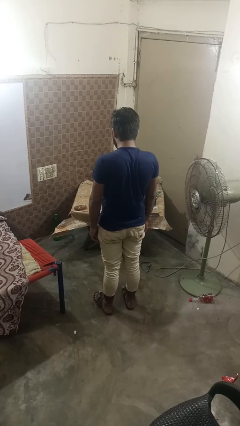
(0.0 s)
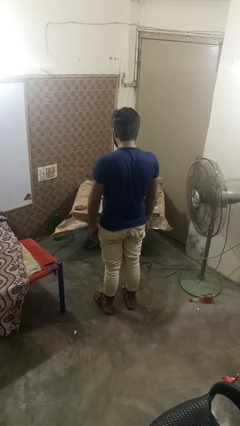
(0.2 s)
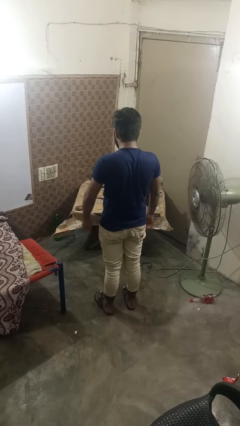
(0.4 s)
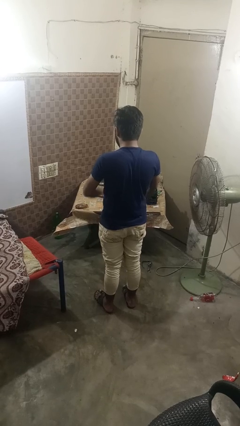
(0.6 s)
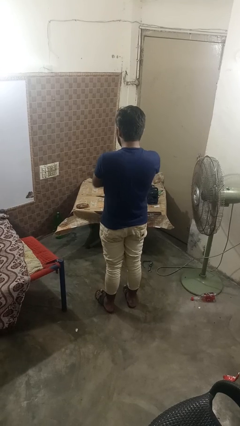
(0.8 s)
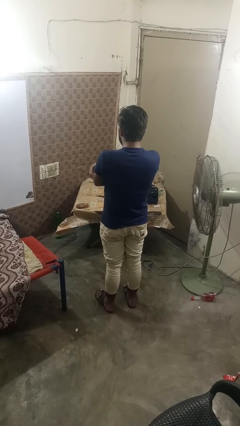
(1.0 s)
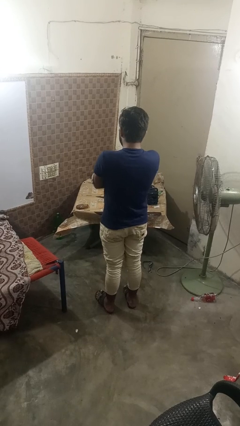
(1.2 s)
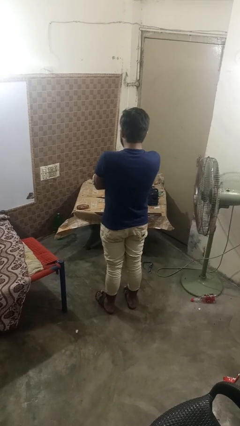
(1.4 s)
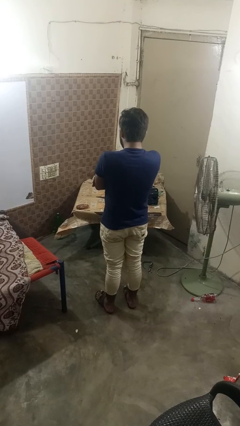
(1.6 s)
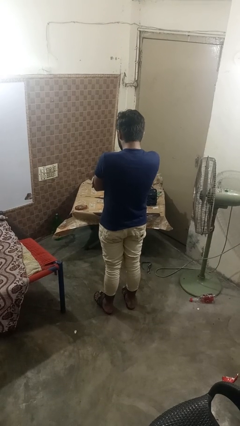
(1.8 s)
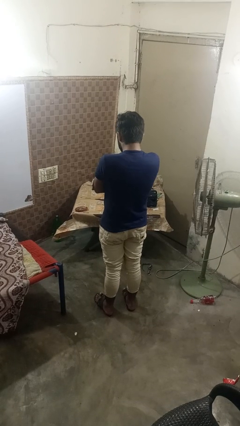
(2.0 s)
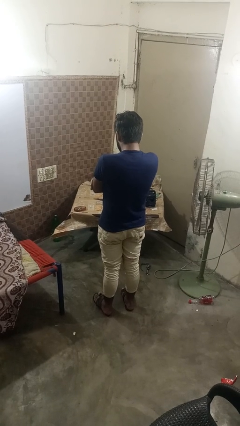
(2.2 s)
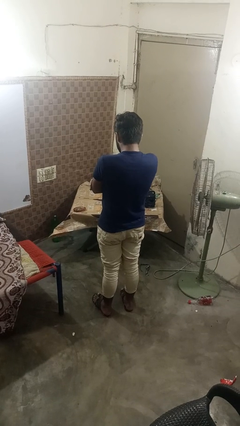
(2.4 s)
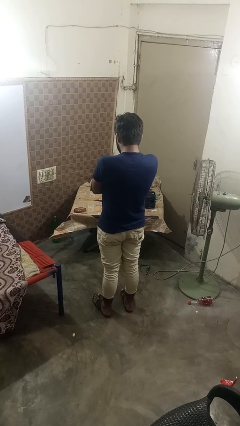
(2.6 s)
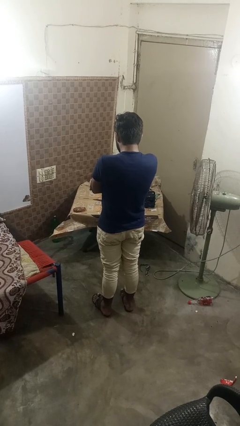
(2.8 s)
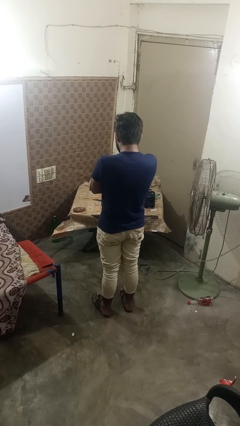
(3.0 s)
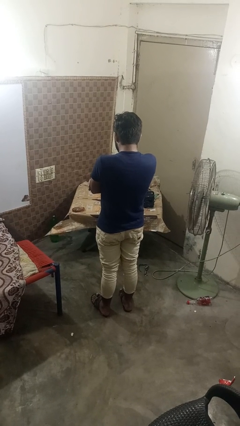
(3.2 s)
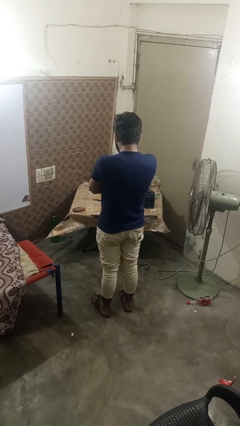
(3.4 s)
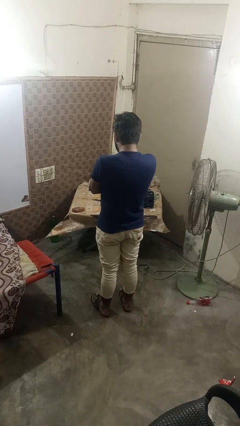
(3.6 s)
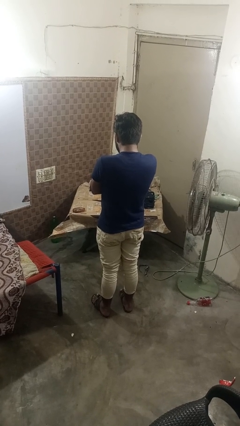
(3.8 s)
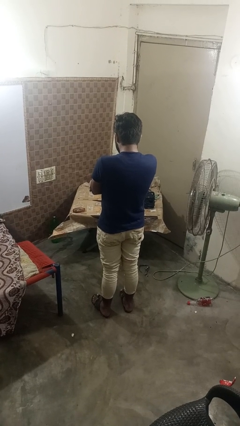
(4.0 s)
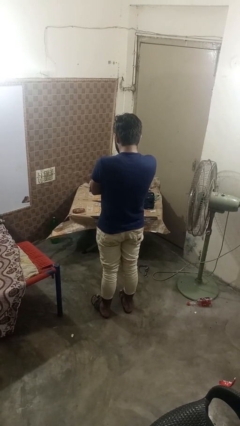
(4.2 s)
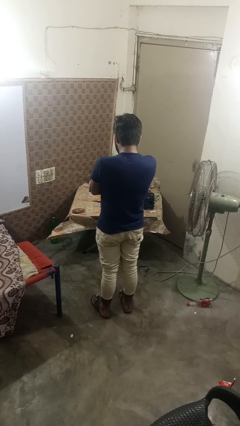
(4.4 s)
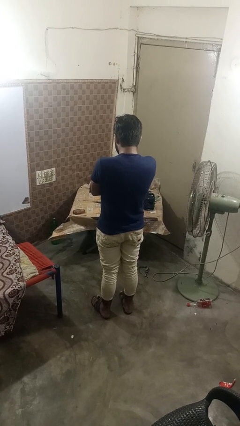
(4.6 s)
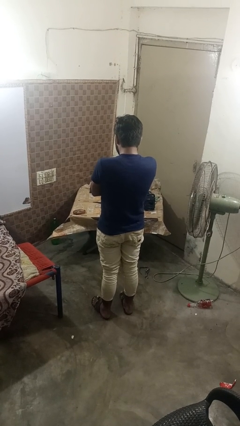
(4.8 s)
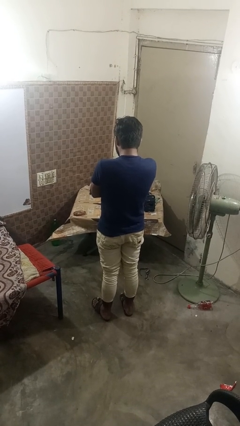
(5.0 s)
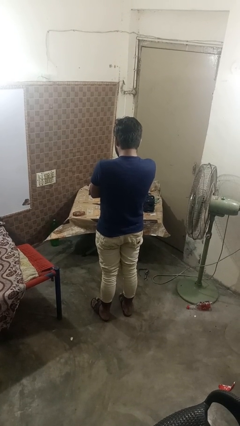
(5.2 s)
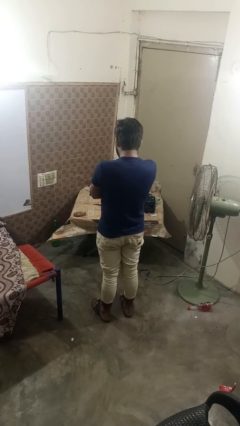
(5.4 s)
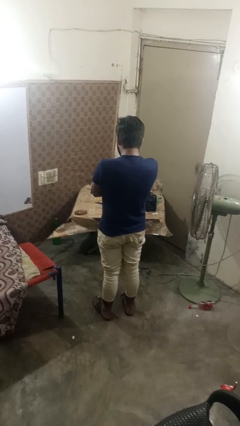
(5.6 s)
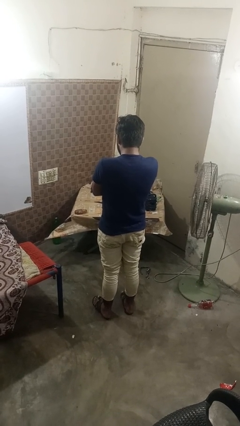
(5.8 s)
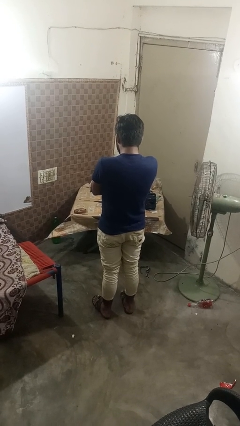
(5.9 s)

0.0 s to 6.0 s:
person crosses arms

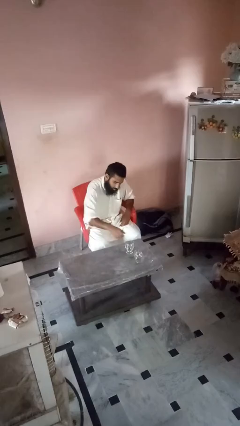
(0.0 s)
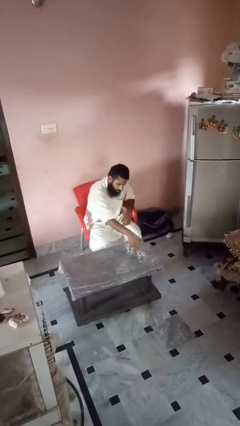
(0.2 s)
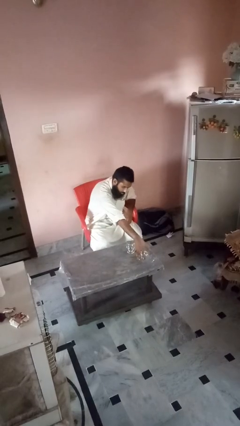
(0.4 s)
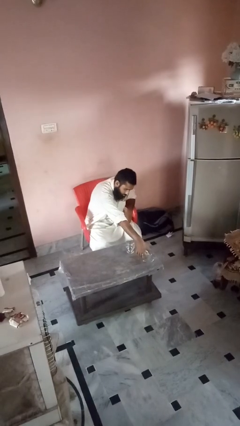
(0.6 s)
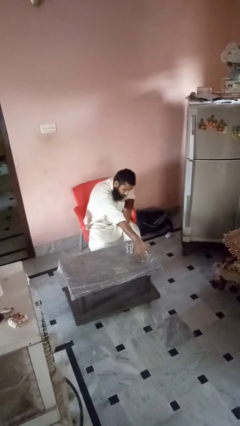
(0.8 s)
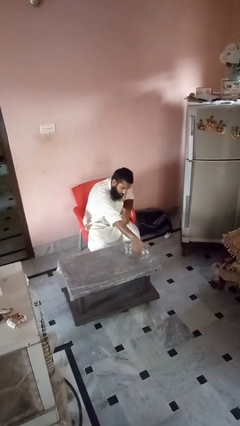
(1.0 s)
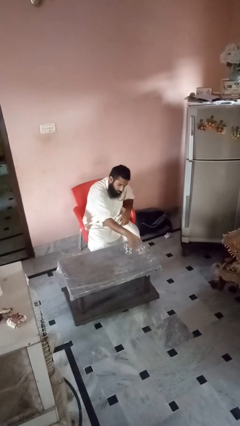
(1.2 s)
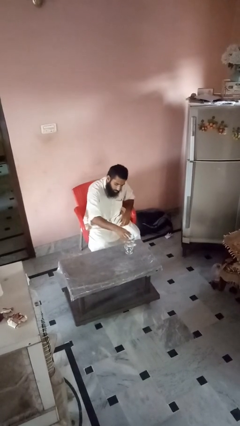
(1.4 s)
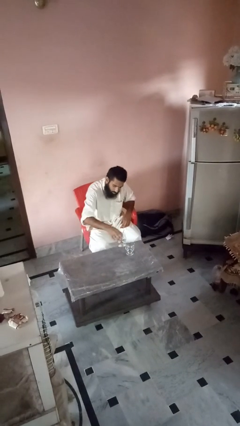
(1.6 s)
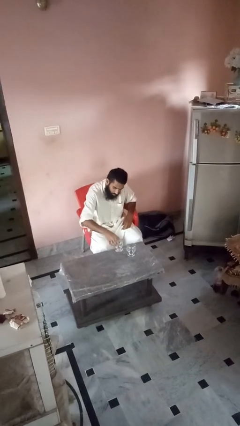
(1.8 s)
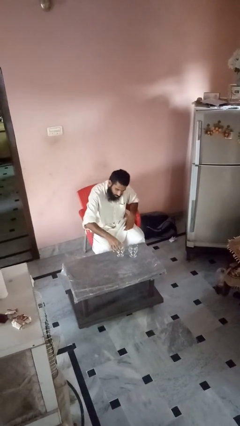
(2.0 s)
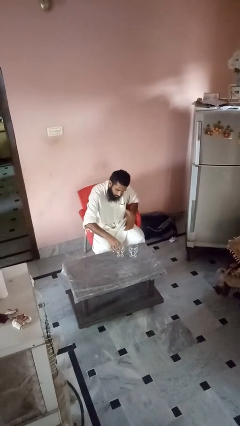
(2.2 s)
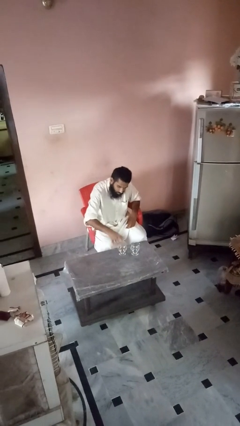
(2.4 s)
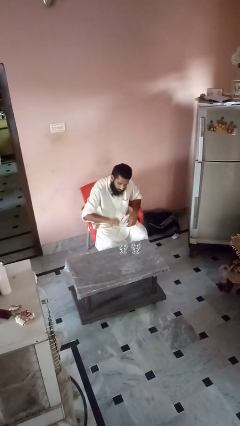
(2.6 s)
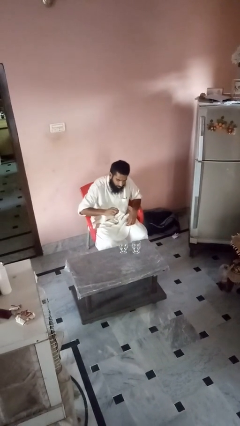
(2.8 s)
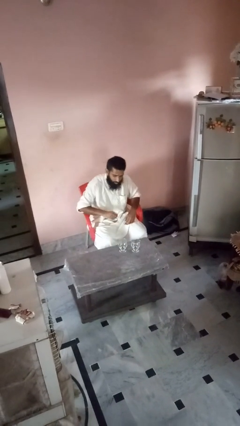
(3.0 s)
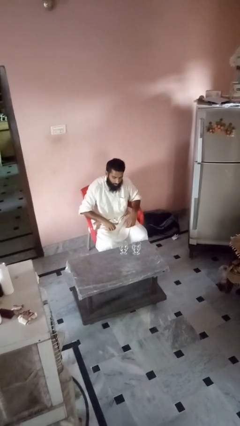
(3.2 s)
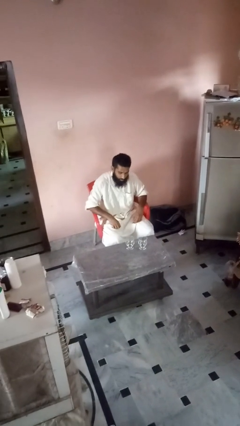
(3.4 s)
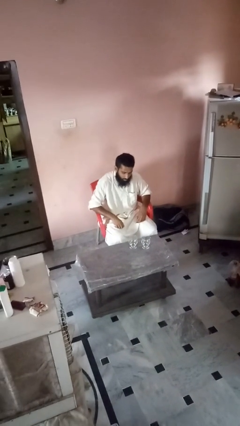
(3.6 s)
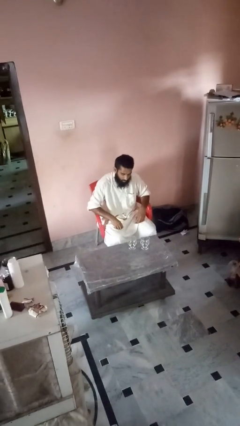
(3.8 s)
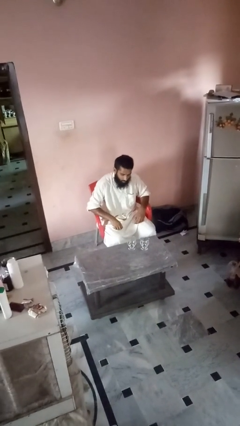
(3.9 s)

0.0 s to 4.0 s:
person sets upright glass

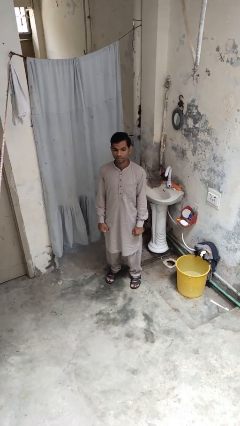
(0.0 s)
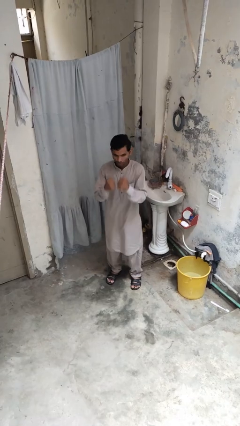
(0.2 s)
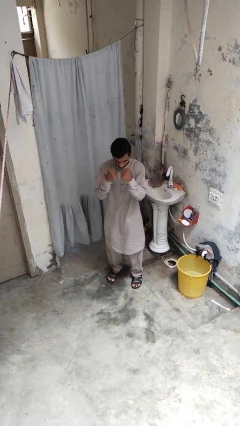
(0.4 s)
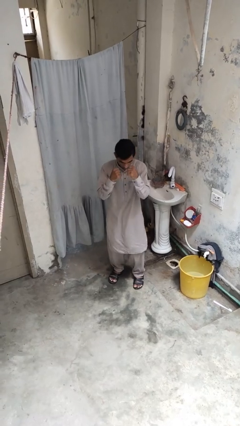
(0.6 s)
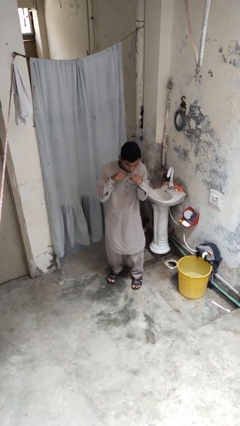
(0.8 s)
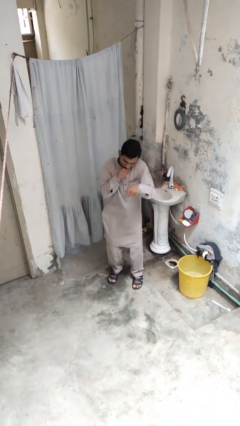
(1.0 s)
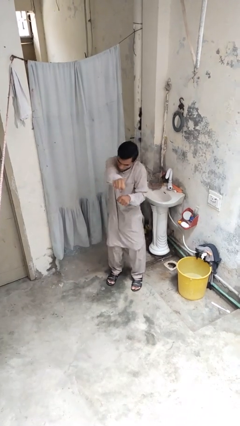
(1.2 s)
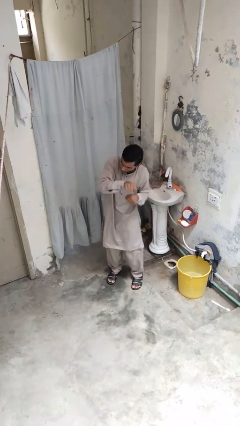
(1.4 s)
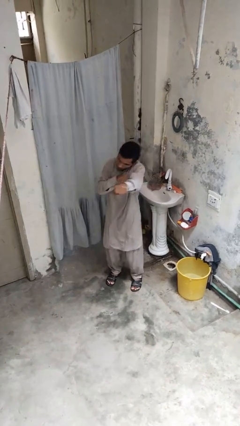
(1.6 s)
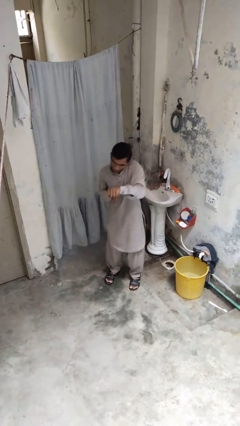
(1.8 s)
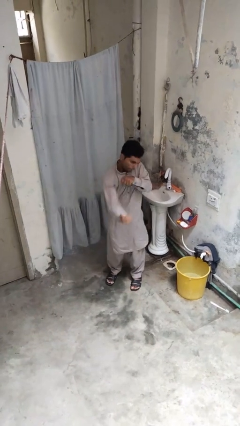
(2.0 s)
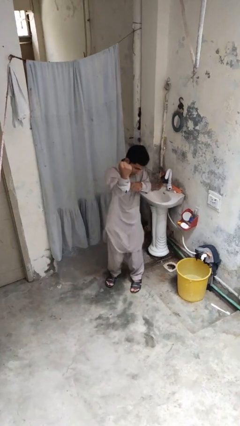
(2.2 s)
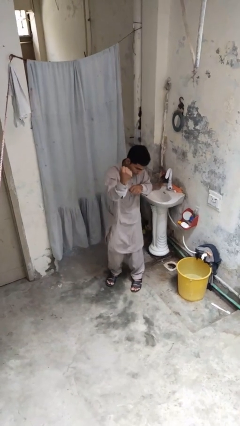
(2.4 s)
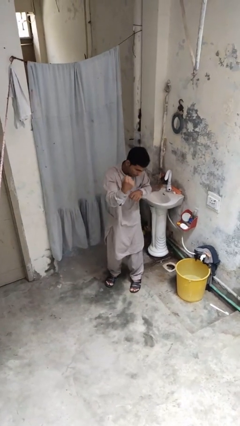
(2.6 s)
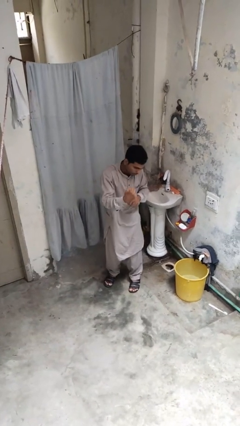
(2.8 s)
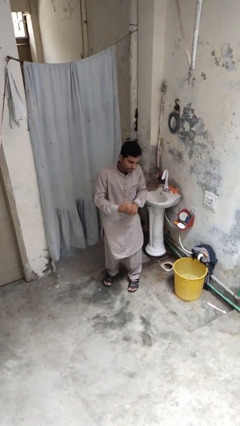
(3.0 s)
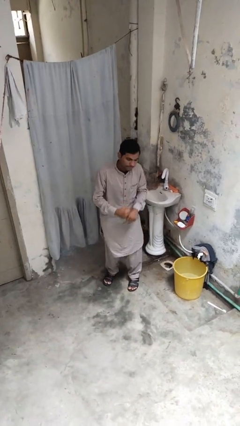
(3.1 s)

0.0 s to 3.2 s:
person punches

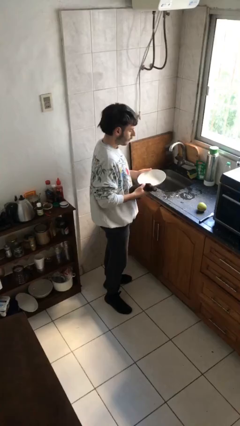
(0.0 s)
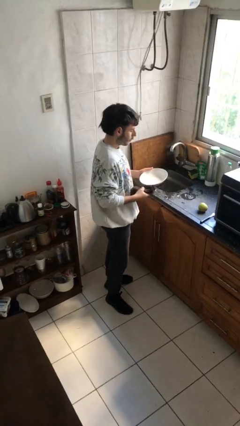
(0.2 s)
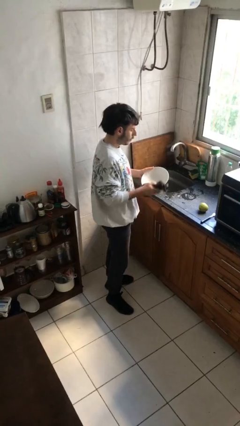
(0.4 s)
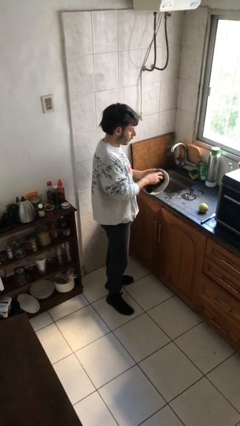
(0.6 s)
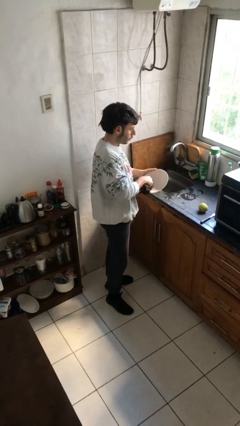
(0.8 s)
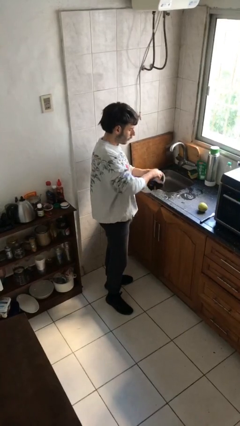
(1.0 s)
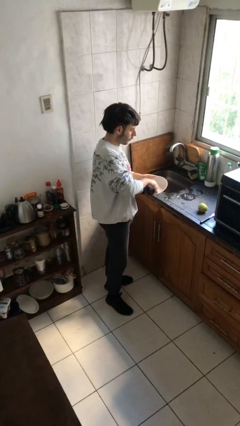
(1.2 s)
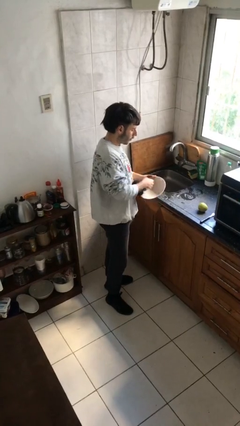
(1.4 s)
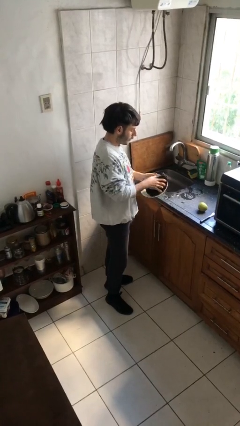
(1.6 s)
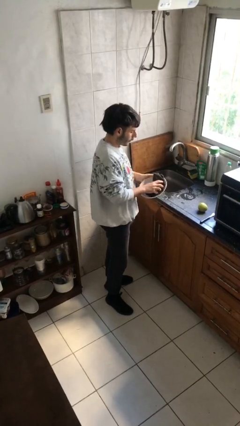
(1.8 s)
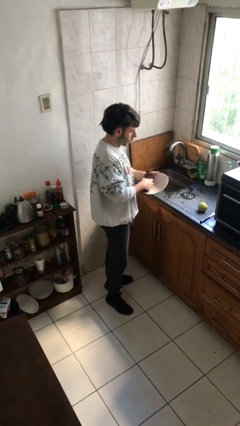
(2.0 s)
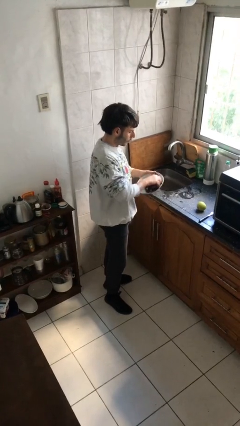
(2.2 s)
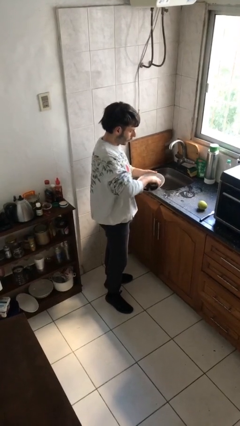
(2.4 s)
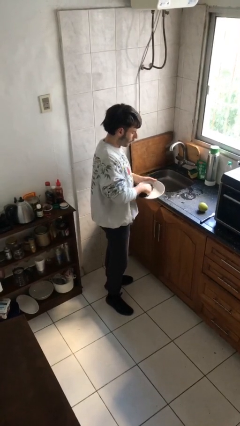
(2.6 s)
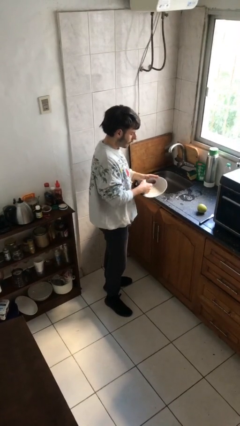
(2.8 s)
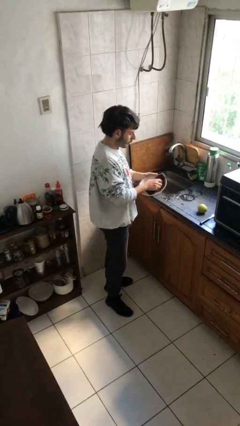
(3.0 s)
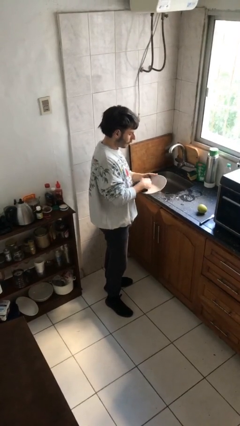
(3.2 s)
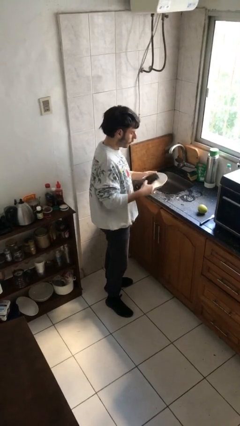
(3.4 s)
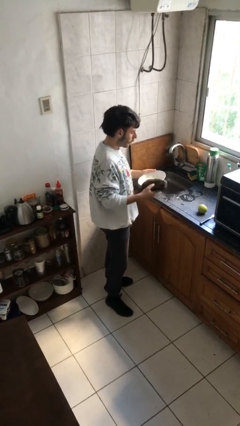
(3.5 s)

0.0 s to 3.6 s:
person dries dish

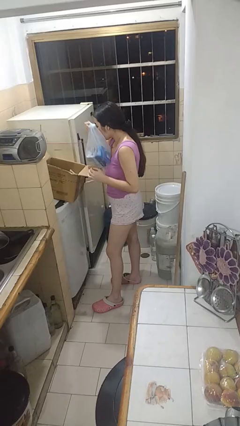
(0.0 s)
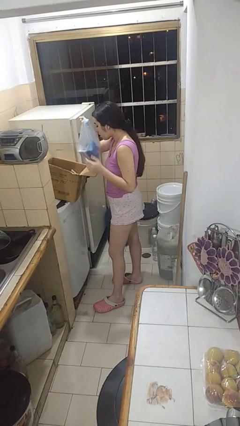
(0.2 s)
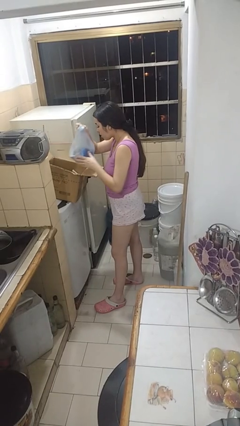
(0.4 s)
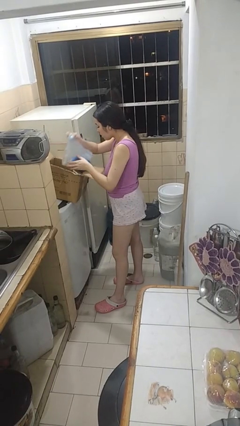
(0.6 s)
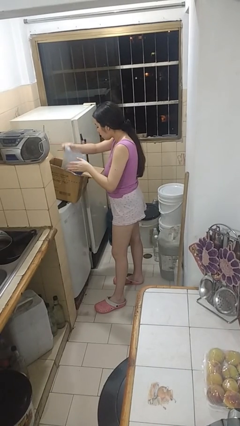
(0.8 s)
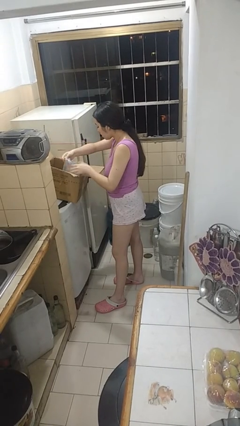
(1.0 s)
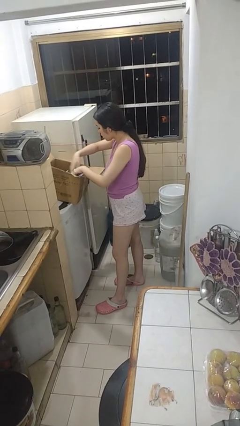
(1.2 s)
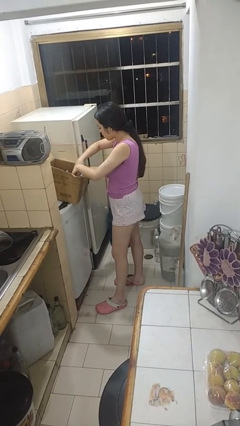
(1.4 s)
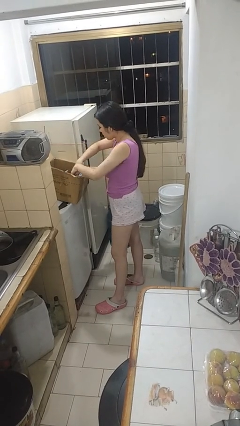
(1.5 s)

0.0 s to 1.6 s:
person puts object into box
